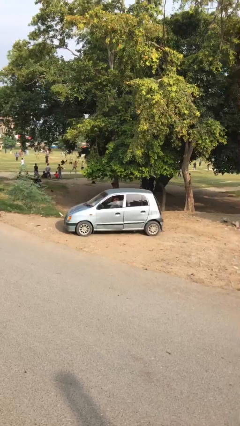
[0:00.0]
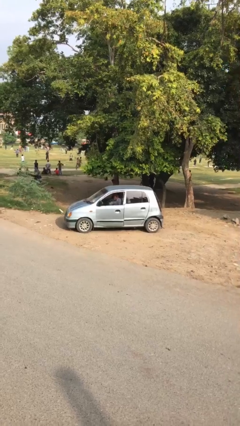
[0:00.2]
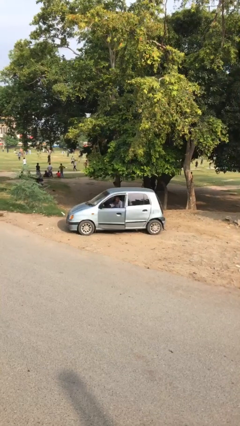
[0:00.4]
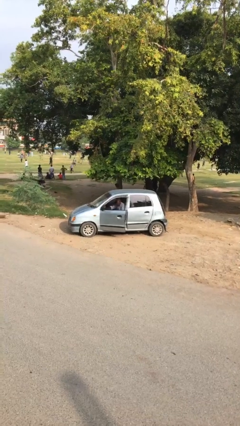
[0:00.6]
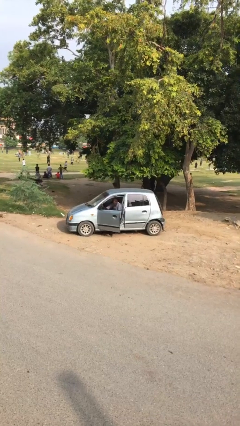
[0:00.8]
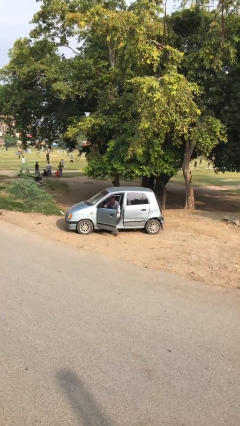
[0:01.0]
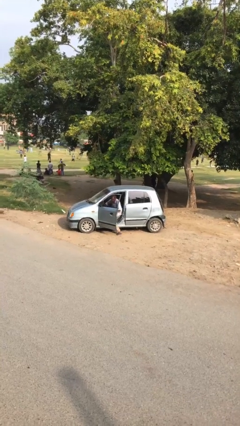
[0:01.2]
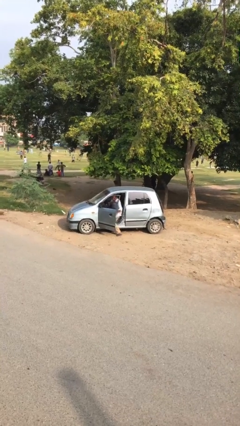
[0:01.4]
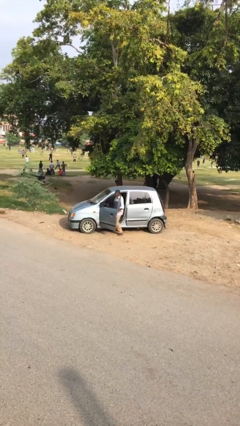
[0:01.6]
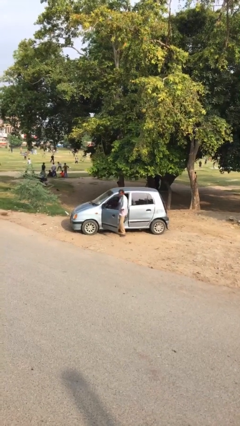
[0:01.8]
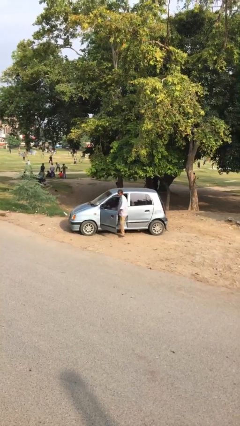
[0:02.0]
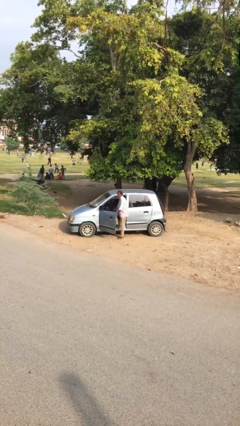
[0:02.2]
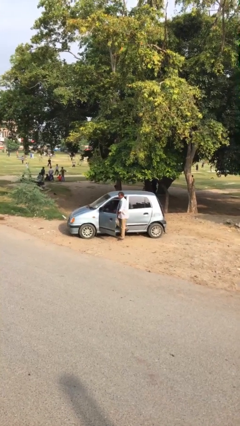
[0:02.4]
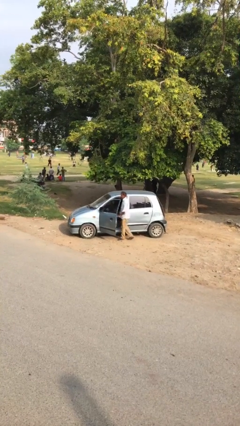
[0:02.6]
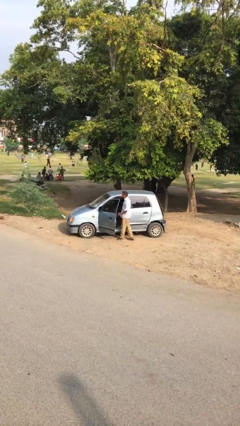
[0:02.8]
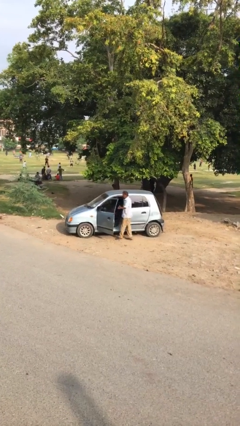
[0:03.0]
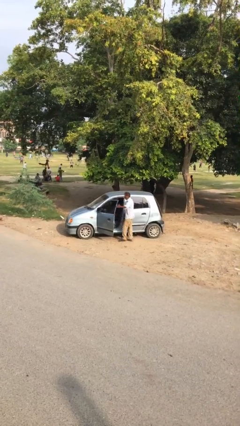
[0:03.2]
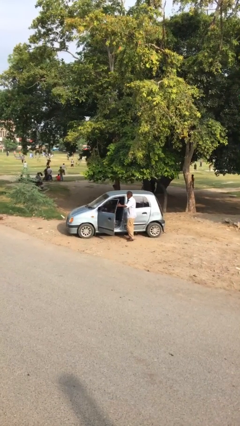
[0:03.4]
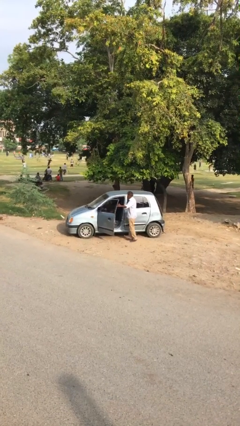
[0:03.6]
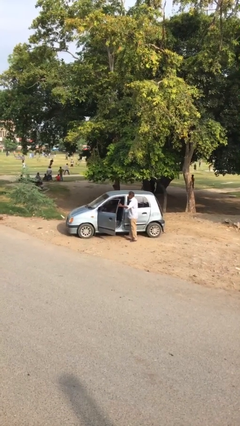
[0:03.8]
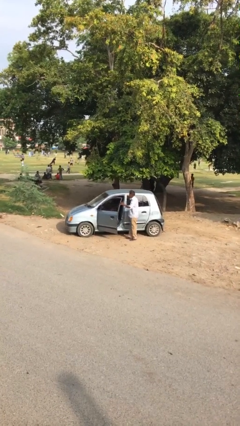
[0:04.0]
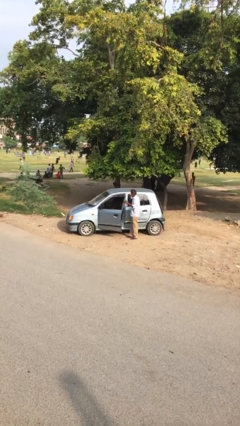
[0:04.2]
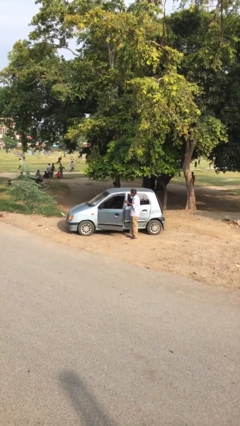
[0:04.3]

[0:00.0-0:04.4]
car drops off person

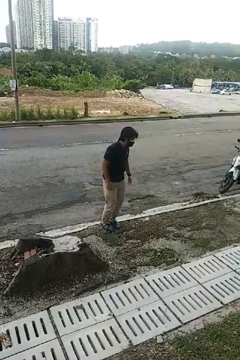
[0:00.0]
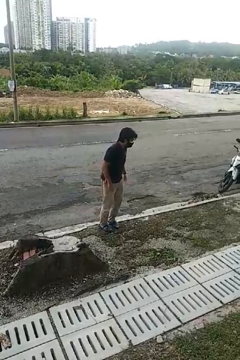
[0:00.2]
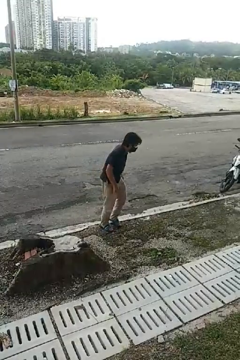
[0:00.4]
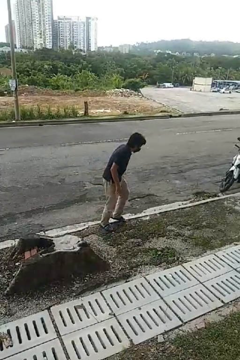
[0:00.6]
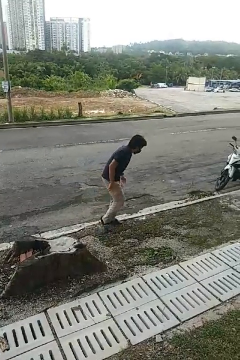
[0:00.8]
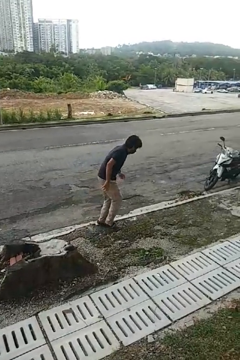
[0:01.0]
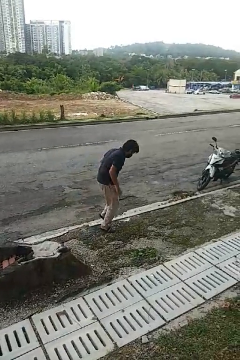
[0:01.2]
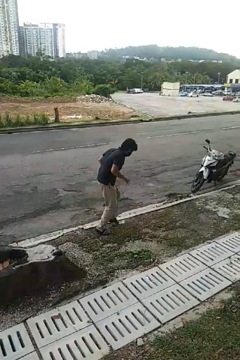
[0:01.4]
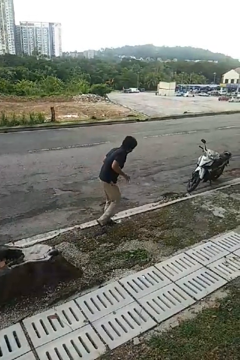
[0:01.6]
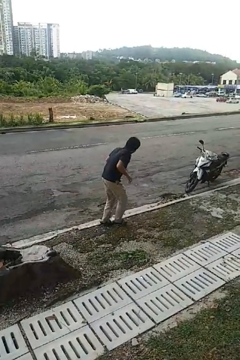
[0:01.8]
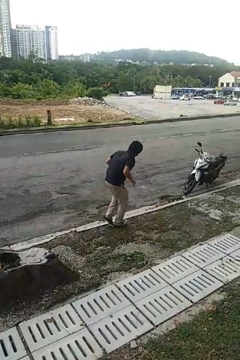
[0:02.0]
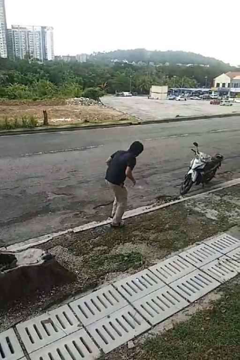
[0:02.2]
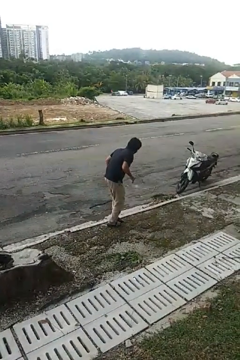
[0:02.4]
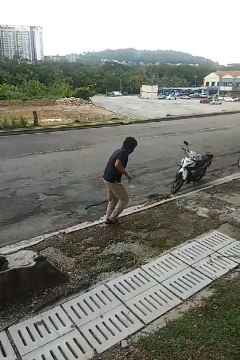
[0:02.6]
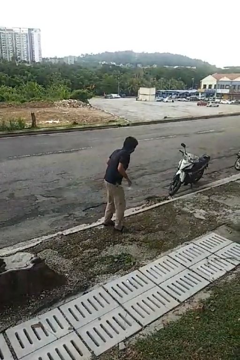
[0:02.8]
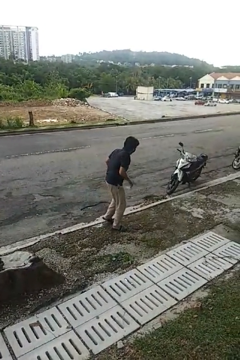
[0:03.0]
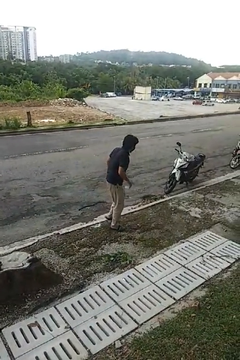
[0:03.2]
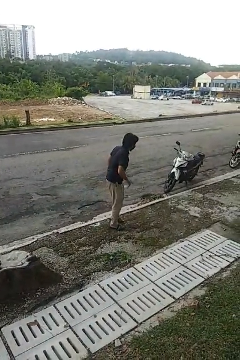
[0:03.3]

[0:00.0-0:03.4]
person walks tiptoe

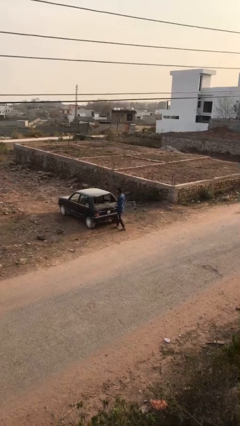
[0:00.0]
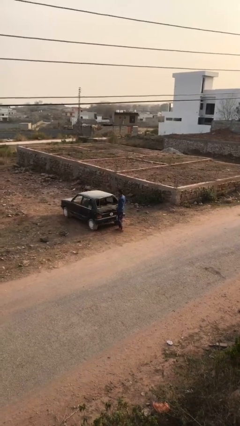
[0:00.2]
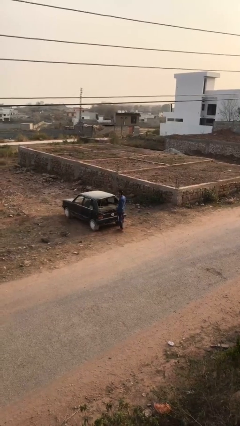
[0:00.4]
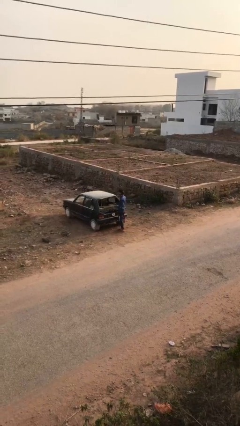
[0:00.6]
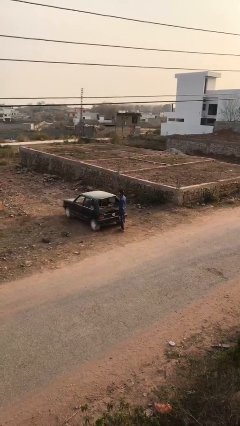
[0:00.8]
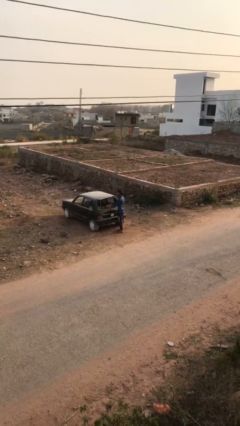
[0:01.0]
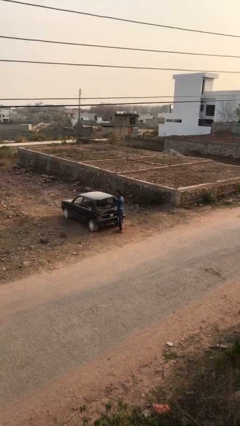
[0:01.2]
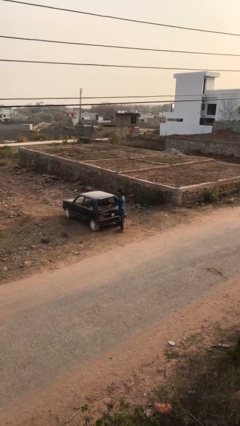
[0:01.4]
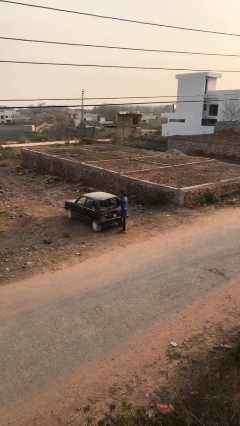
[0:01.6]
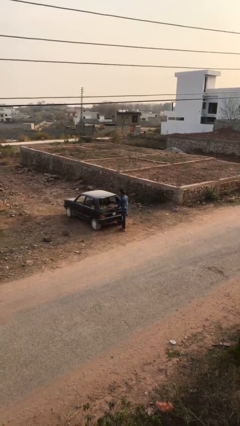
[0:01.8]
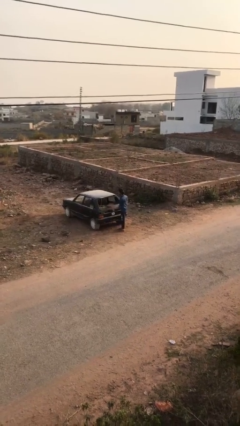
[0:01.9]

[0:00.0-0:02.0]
person loads car

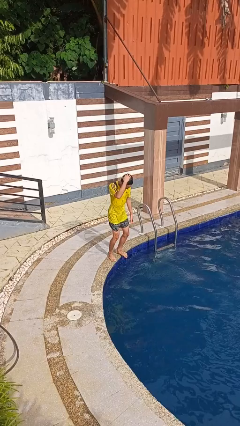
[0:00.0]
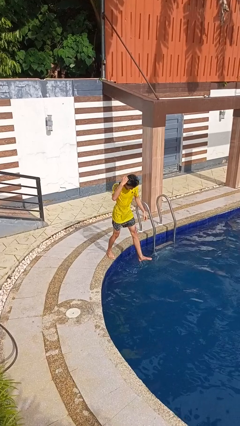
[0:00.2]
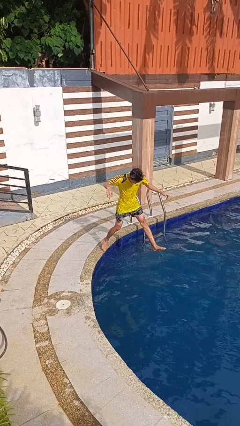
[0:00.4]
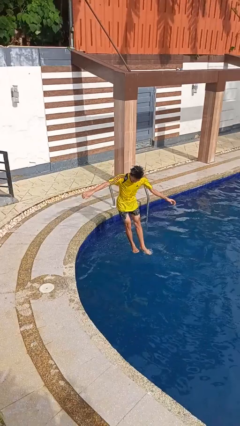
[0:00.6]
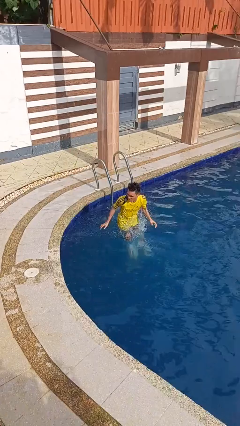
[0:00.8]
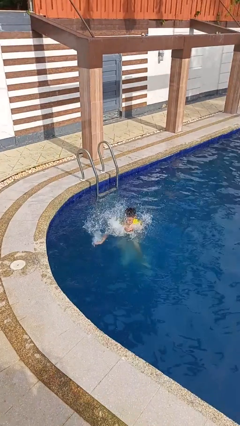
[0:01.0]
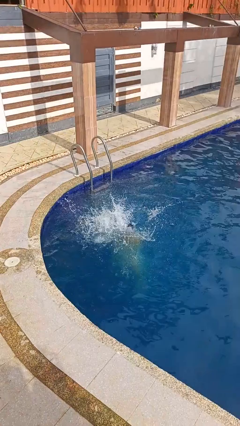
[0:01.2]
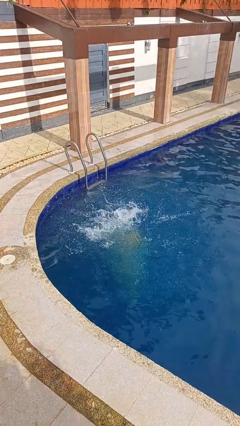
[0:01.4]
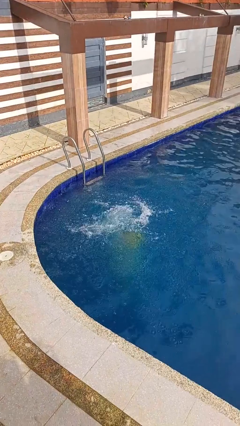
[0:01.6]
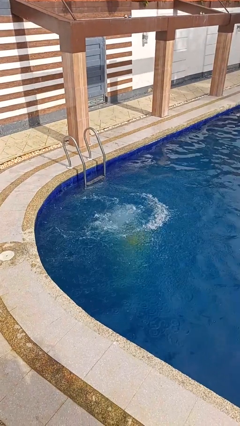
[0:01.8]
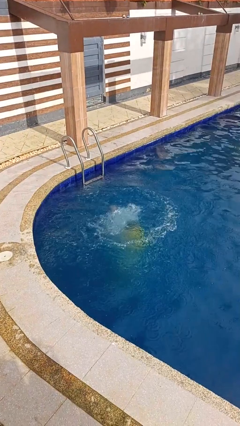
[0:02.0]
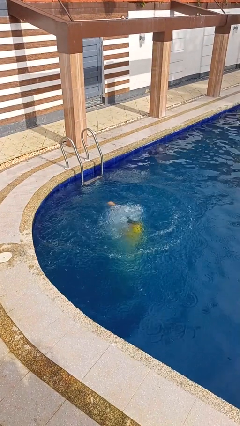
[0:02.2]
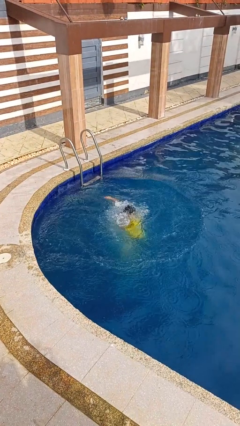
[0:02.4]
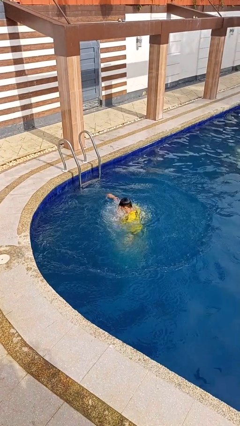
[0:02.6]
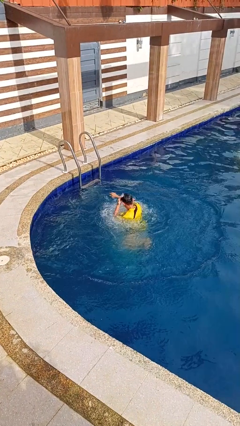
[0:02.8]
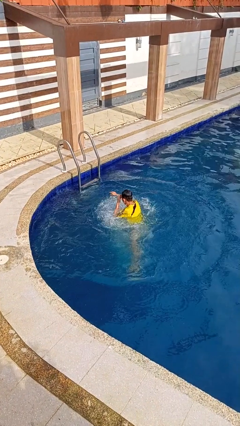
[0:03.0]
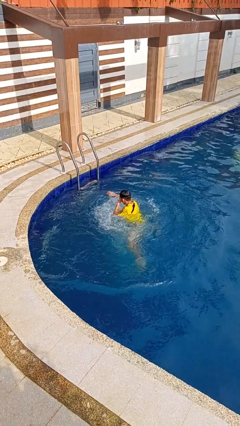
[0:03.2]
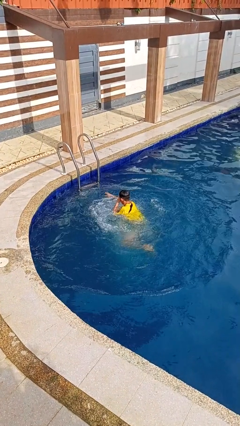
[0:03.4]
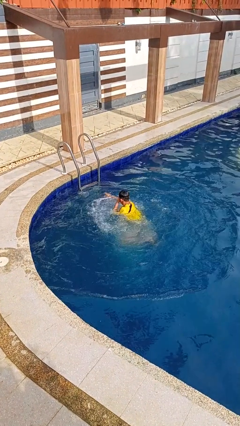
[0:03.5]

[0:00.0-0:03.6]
person jumps into pool

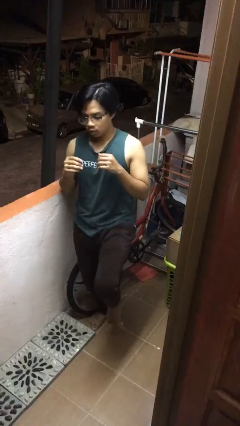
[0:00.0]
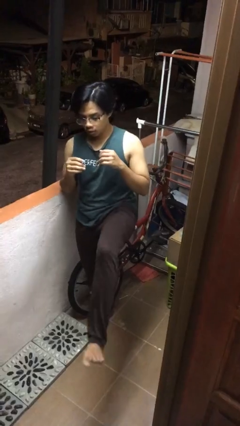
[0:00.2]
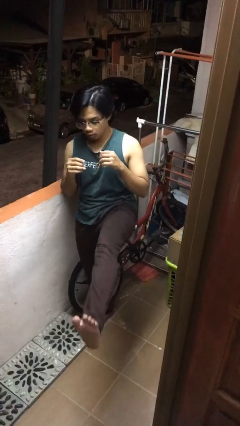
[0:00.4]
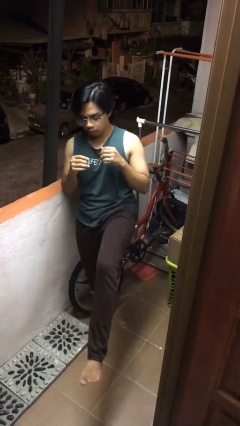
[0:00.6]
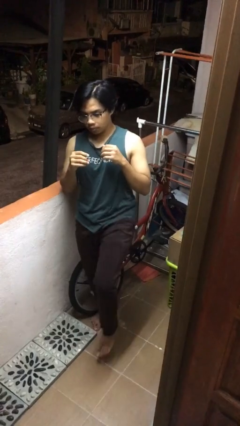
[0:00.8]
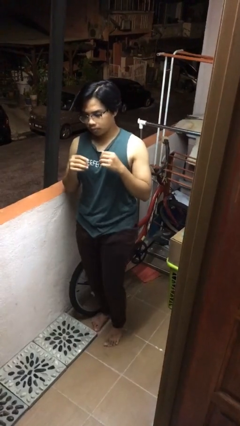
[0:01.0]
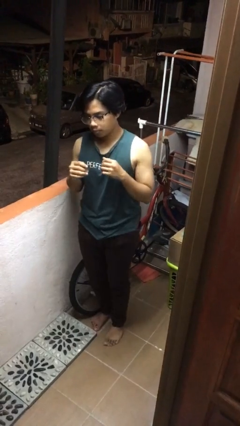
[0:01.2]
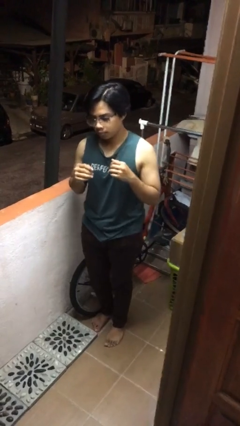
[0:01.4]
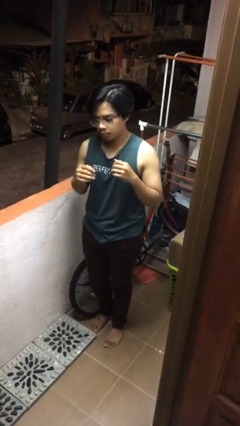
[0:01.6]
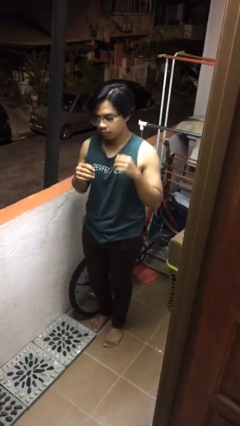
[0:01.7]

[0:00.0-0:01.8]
person karate kicks

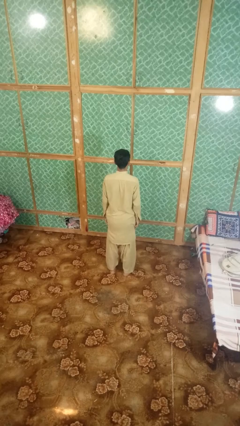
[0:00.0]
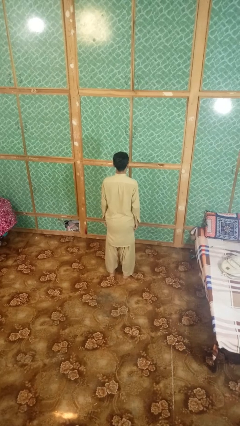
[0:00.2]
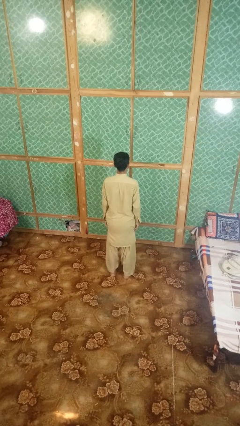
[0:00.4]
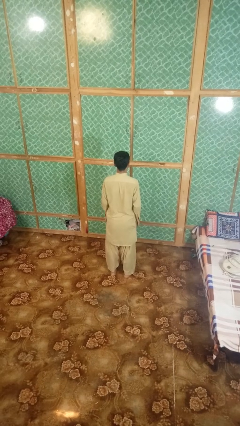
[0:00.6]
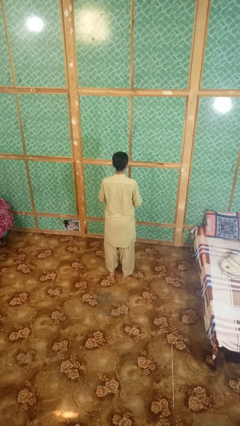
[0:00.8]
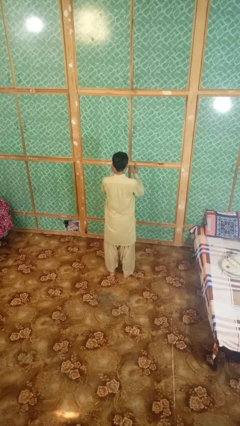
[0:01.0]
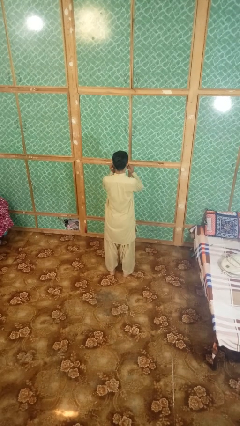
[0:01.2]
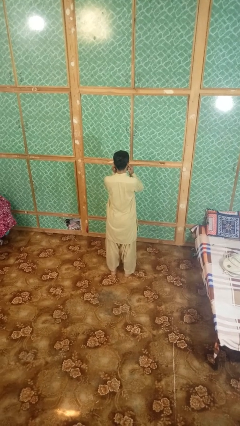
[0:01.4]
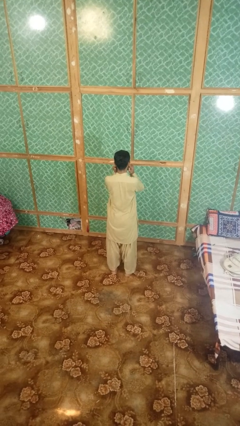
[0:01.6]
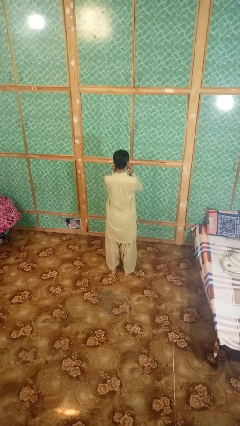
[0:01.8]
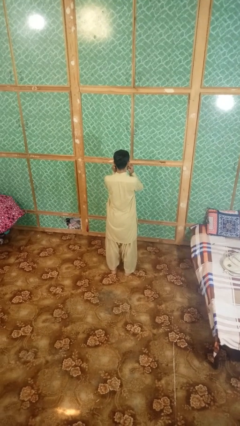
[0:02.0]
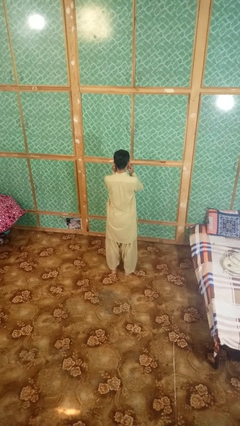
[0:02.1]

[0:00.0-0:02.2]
person puts fingers in ear

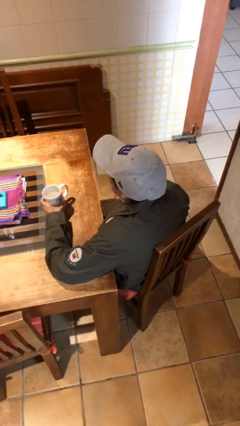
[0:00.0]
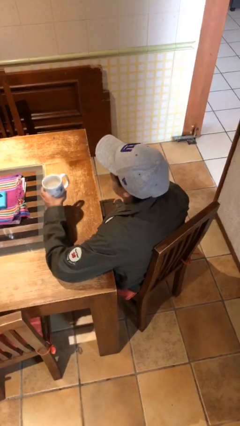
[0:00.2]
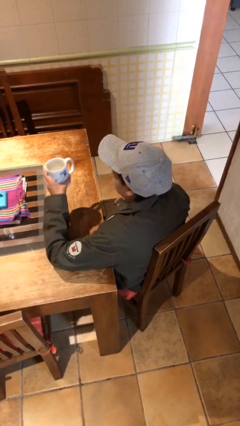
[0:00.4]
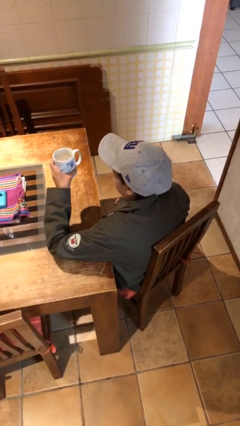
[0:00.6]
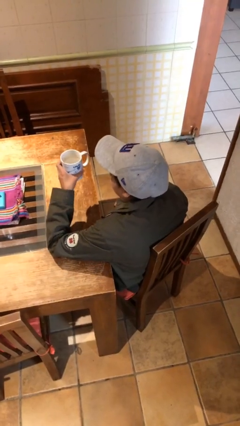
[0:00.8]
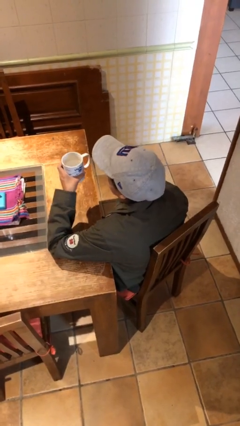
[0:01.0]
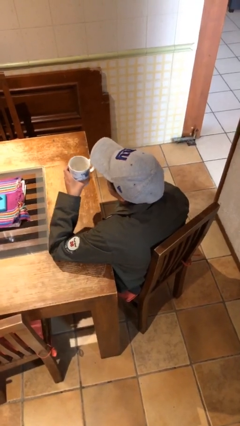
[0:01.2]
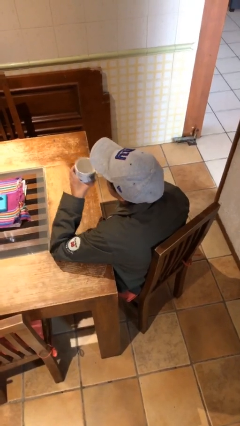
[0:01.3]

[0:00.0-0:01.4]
person picks up object from table
